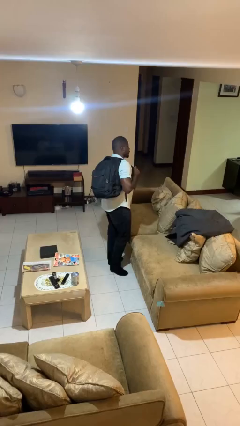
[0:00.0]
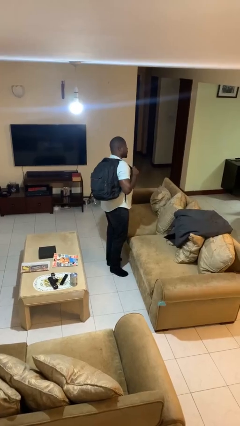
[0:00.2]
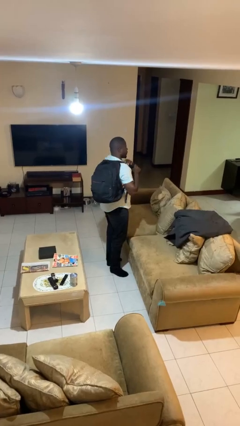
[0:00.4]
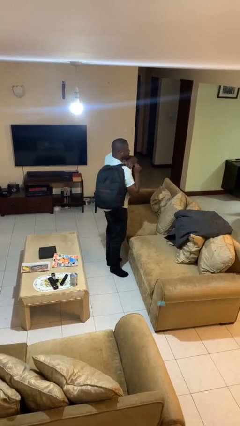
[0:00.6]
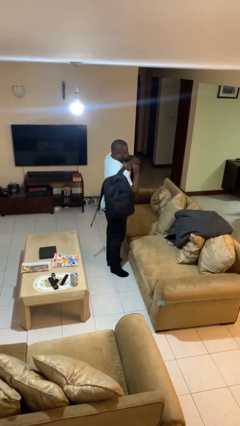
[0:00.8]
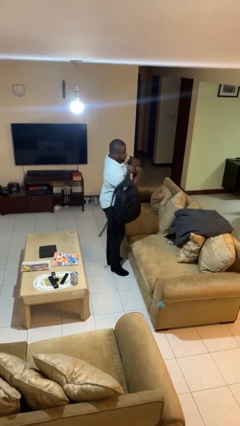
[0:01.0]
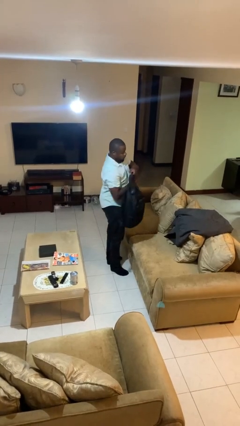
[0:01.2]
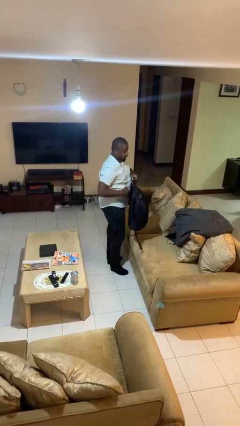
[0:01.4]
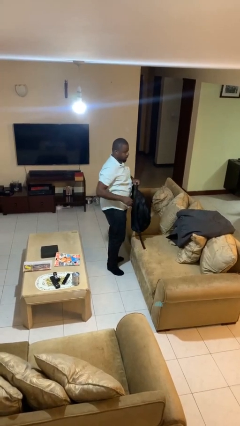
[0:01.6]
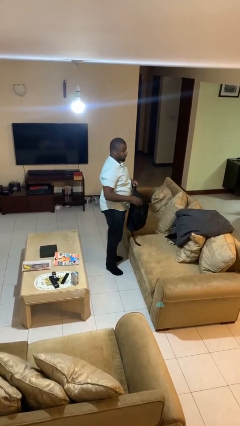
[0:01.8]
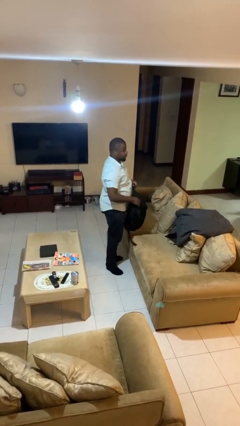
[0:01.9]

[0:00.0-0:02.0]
person takes off backpack

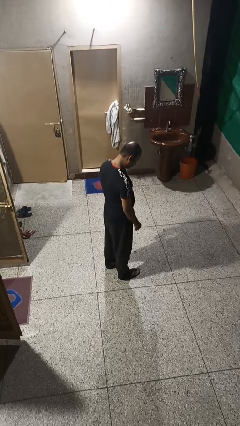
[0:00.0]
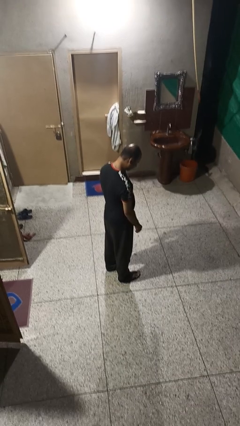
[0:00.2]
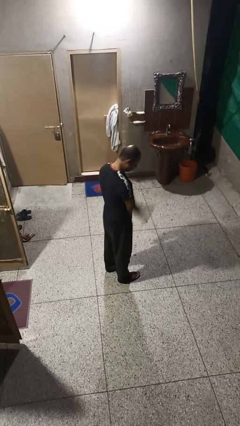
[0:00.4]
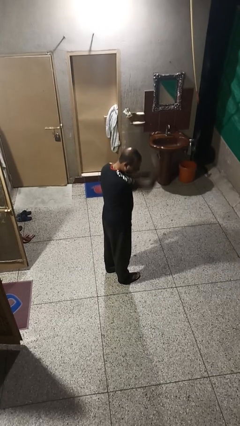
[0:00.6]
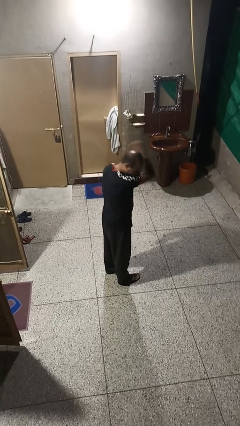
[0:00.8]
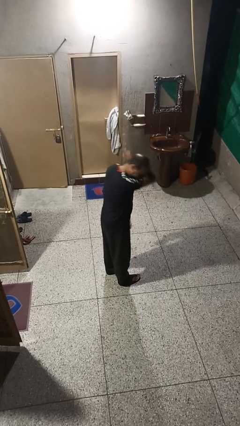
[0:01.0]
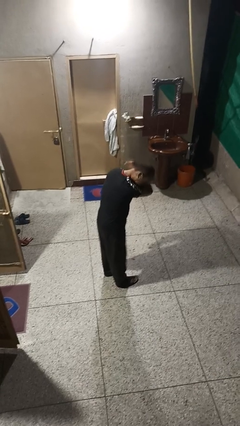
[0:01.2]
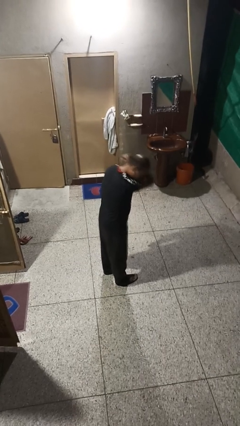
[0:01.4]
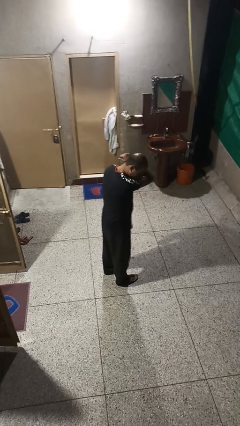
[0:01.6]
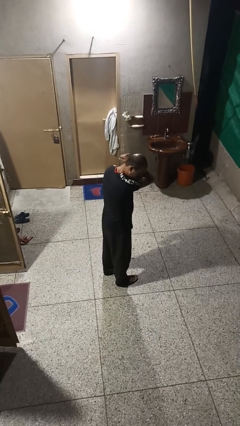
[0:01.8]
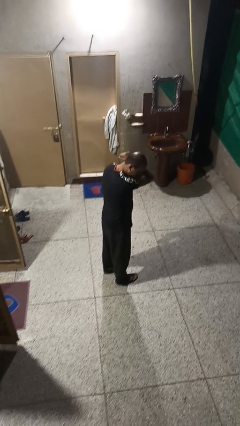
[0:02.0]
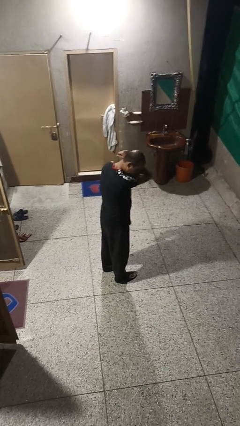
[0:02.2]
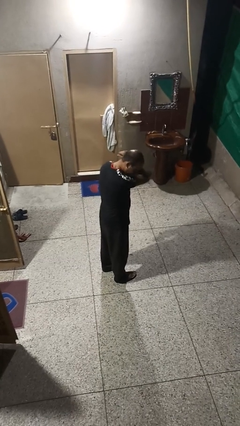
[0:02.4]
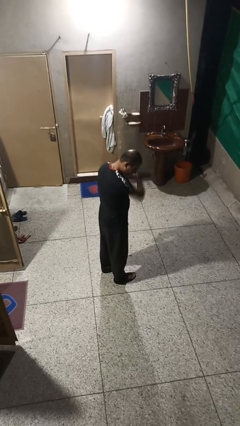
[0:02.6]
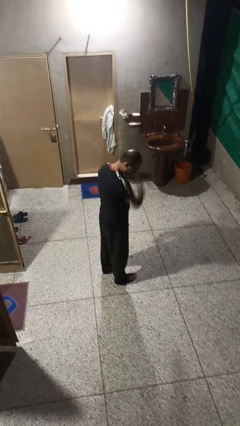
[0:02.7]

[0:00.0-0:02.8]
person sneezes into arm

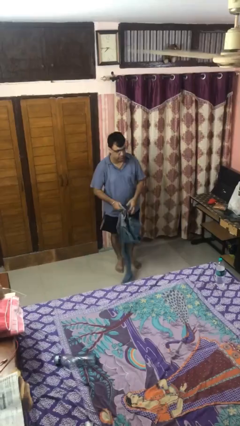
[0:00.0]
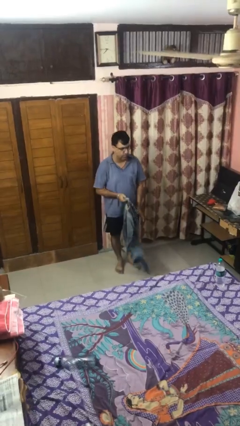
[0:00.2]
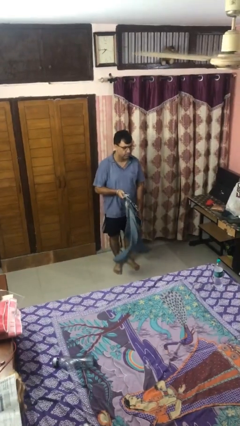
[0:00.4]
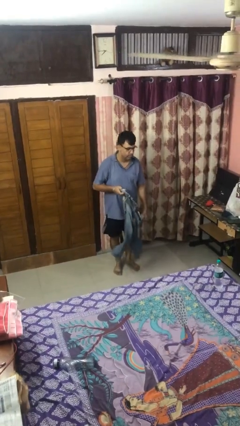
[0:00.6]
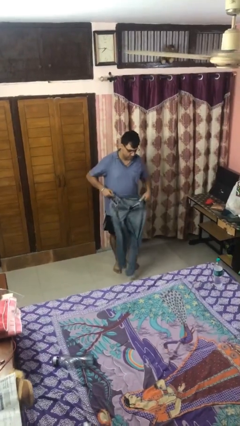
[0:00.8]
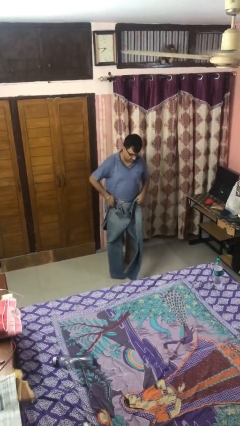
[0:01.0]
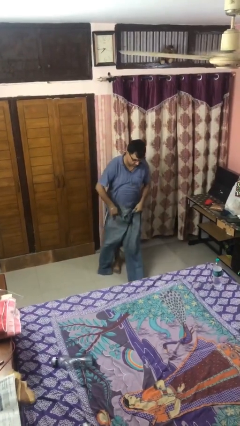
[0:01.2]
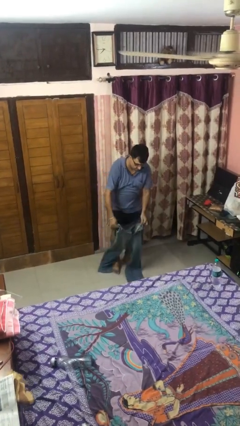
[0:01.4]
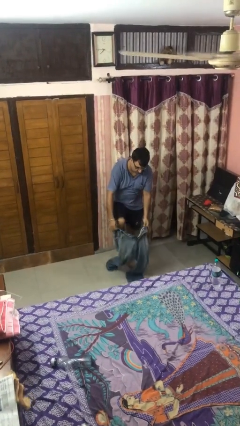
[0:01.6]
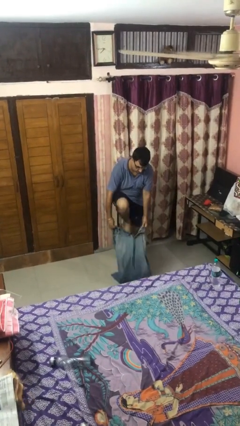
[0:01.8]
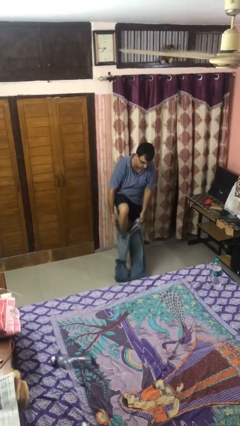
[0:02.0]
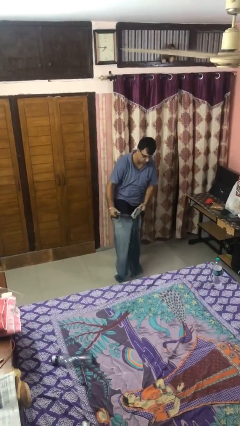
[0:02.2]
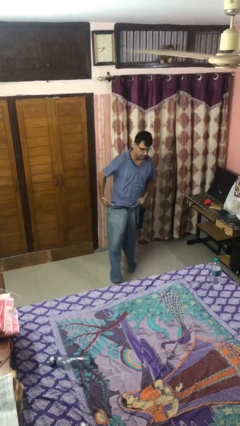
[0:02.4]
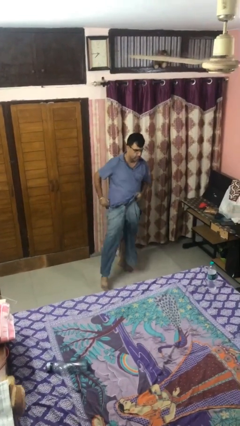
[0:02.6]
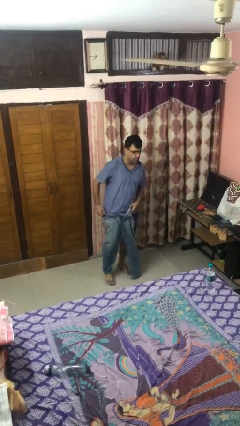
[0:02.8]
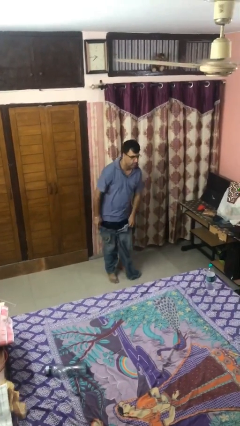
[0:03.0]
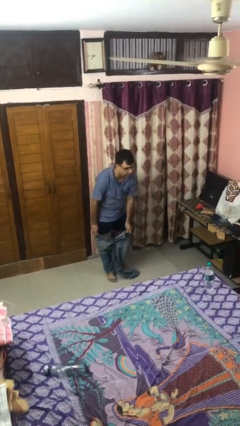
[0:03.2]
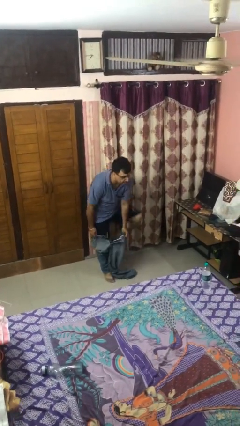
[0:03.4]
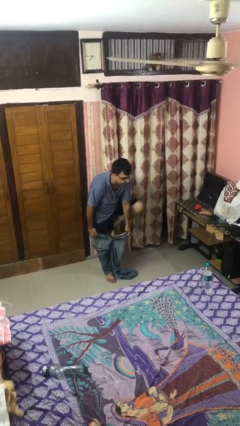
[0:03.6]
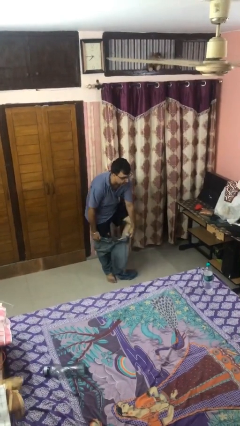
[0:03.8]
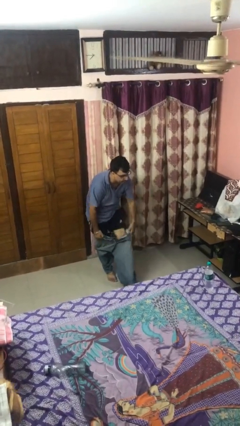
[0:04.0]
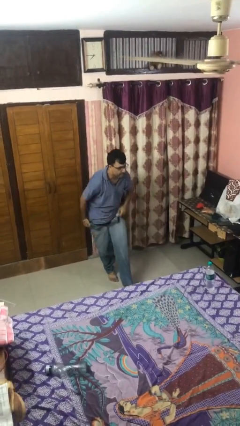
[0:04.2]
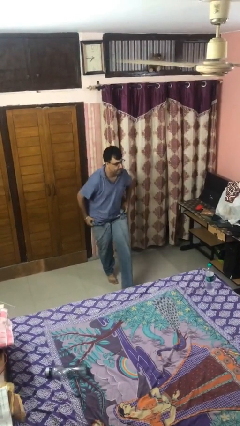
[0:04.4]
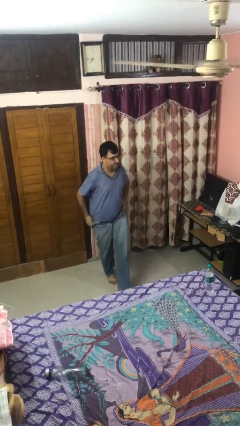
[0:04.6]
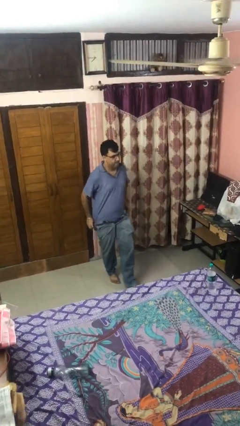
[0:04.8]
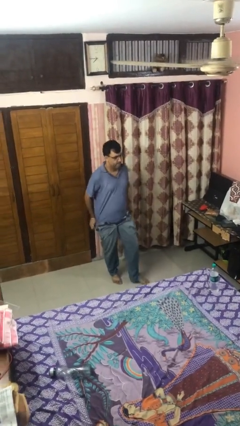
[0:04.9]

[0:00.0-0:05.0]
person puts on pants

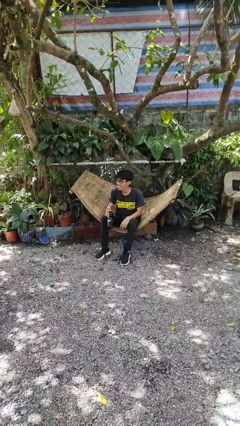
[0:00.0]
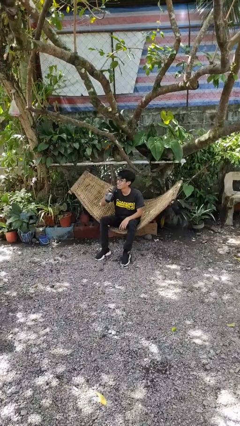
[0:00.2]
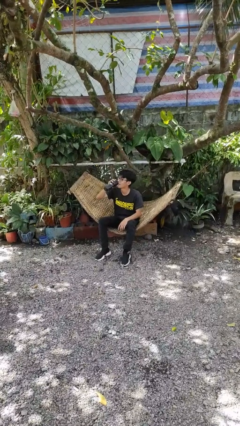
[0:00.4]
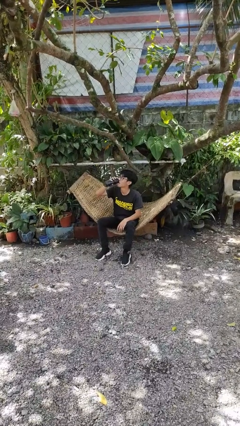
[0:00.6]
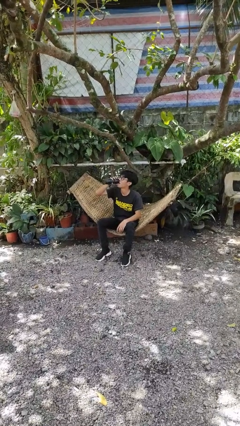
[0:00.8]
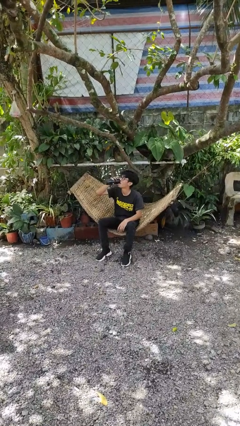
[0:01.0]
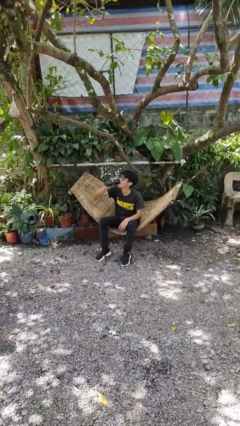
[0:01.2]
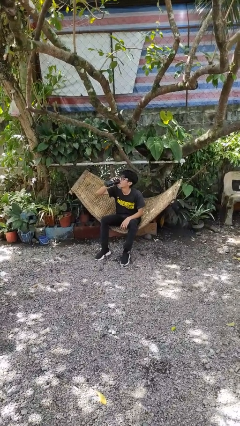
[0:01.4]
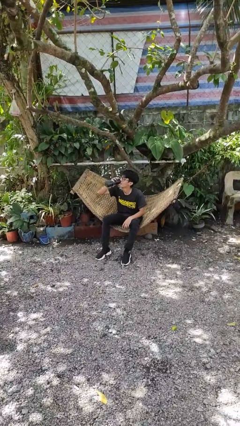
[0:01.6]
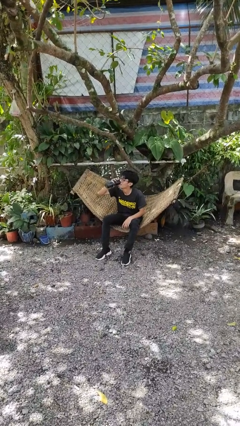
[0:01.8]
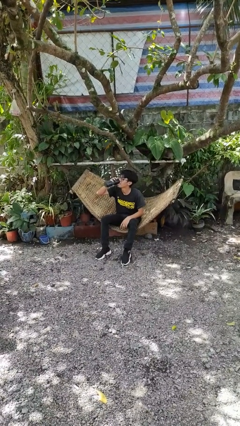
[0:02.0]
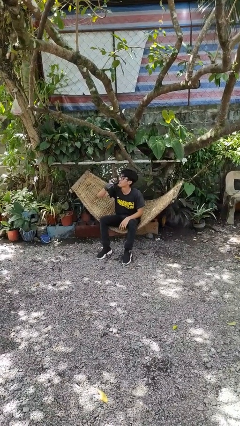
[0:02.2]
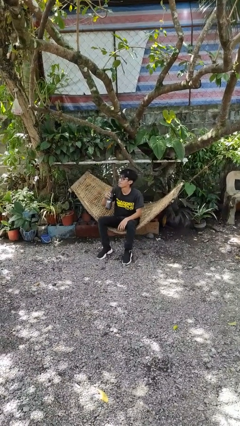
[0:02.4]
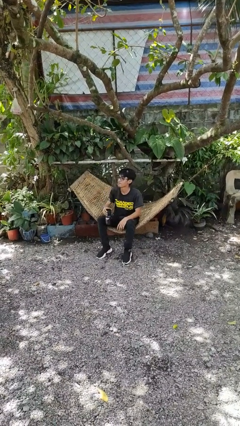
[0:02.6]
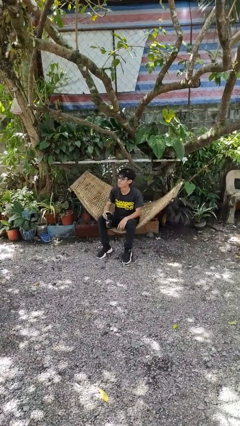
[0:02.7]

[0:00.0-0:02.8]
person drinks from bottle

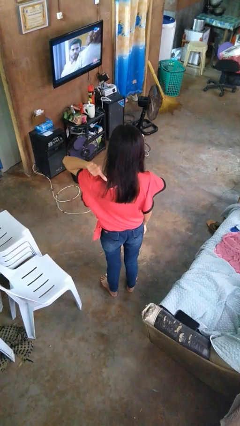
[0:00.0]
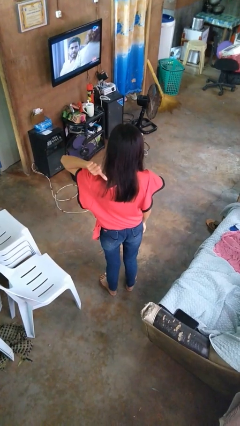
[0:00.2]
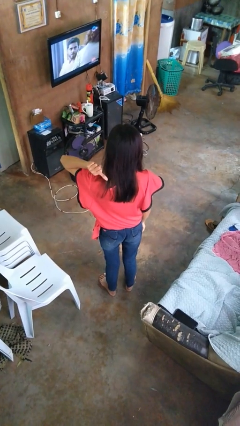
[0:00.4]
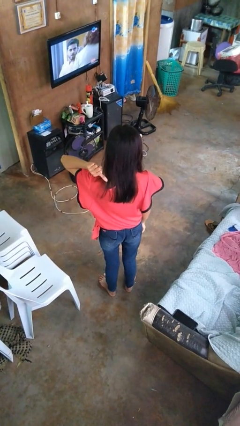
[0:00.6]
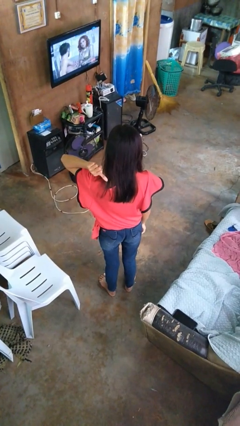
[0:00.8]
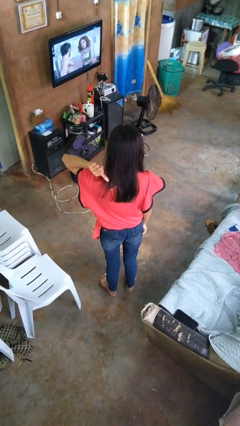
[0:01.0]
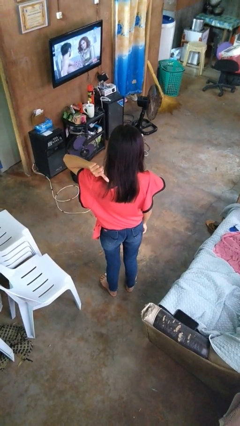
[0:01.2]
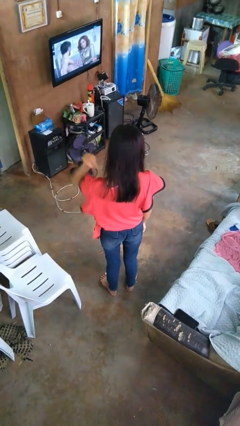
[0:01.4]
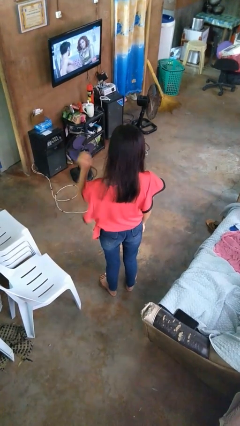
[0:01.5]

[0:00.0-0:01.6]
person gestures behind me

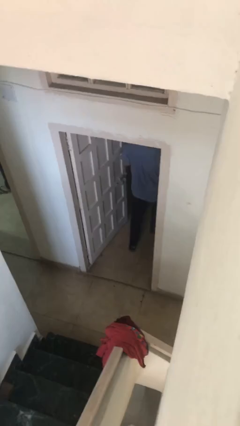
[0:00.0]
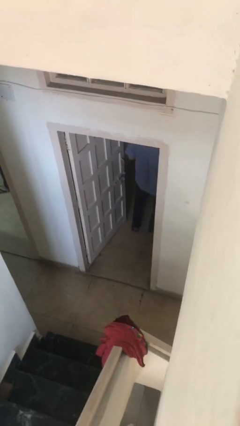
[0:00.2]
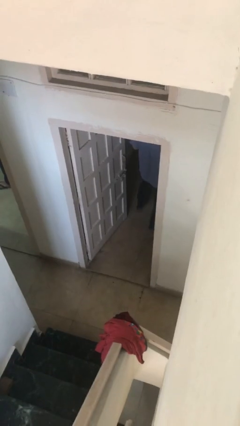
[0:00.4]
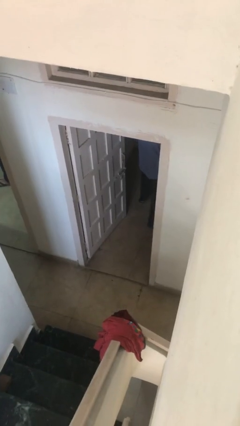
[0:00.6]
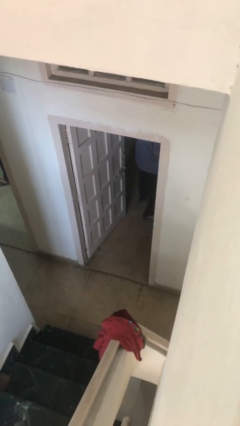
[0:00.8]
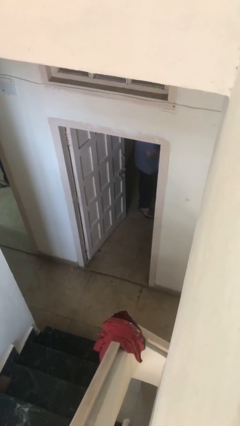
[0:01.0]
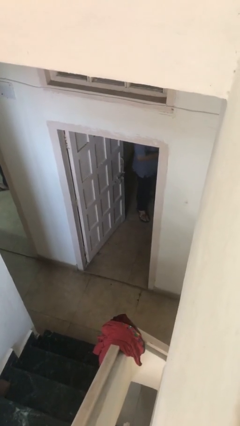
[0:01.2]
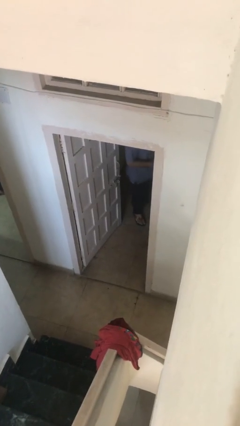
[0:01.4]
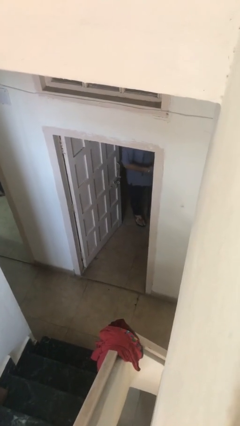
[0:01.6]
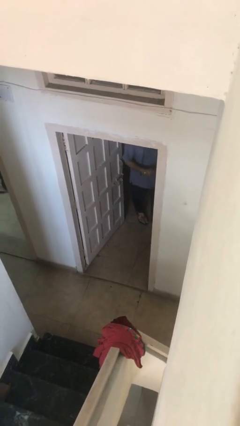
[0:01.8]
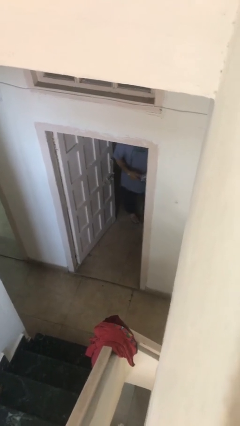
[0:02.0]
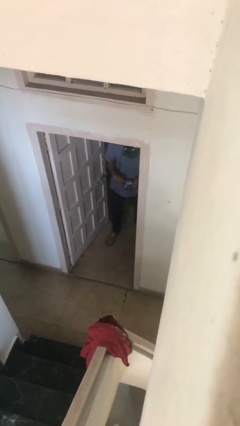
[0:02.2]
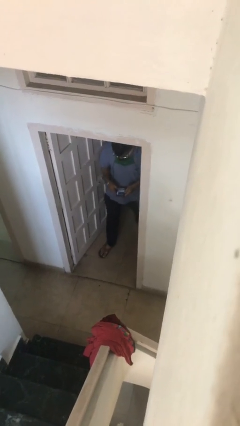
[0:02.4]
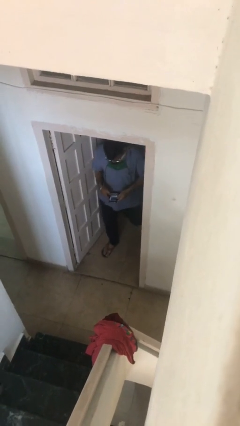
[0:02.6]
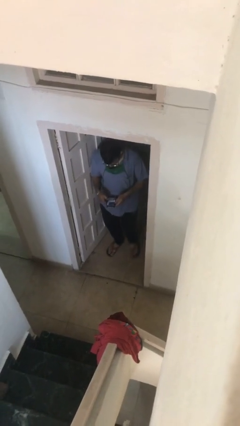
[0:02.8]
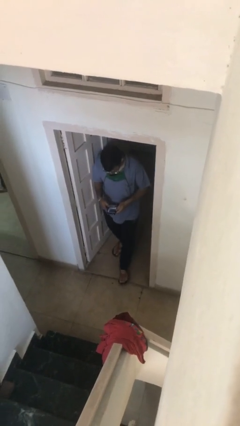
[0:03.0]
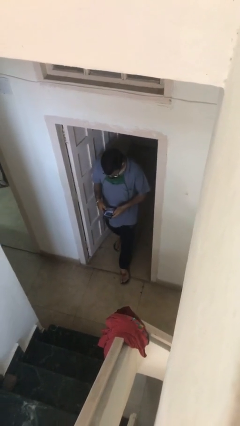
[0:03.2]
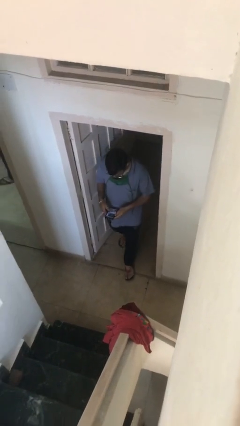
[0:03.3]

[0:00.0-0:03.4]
person enters scene through structure
